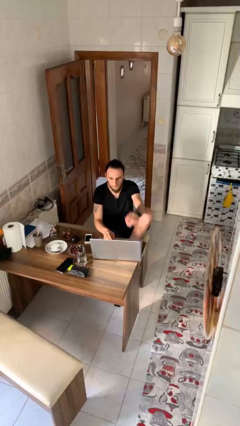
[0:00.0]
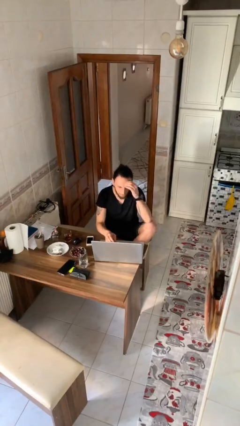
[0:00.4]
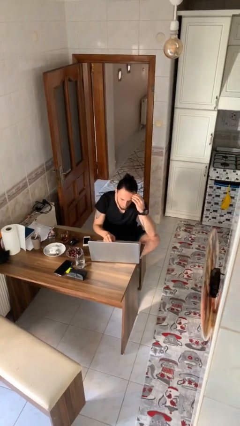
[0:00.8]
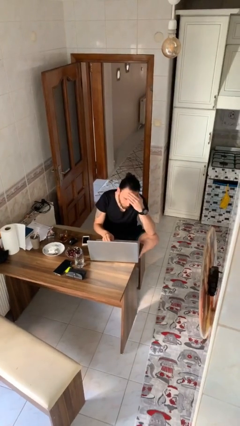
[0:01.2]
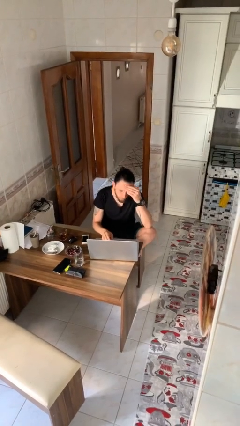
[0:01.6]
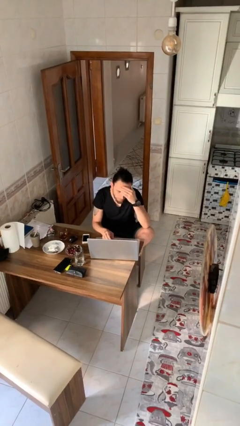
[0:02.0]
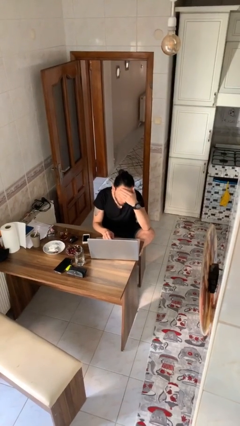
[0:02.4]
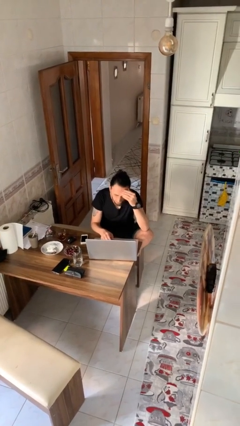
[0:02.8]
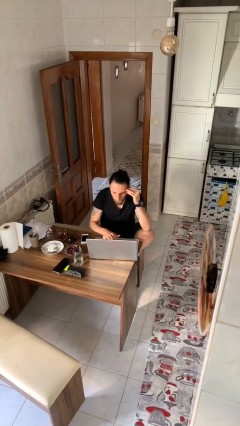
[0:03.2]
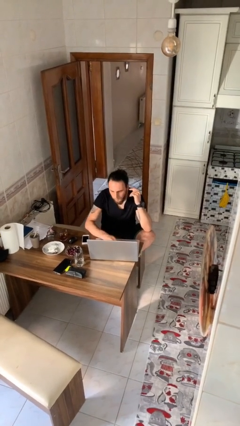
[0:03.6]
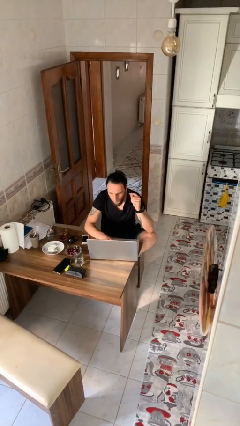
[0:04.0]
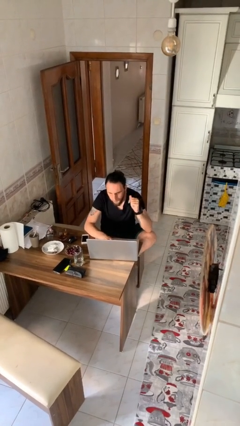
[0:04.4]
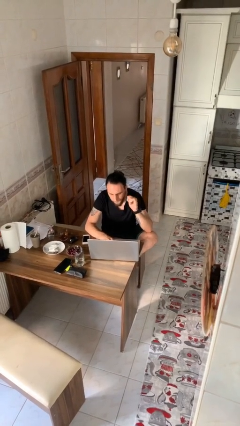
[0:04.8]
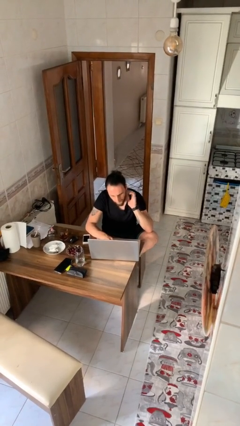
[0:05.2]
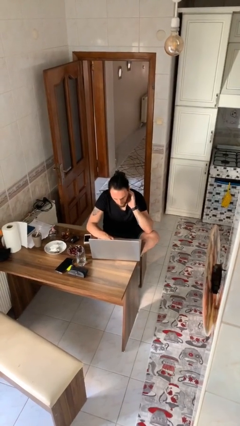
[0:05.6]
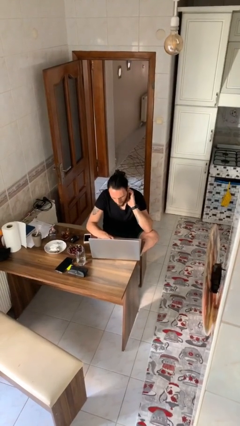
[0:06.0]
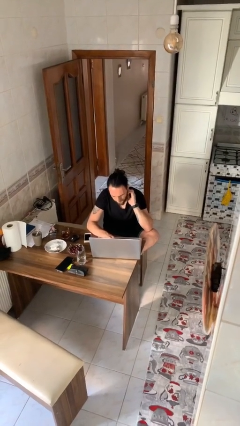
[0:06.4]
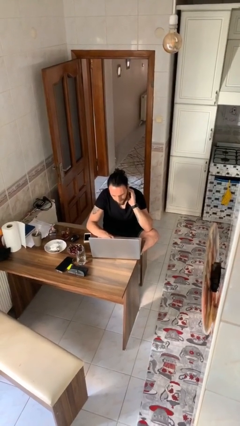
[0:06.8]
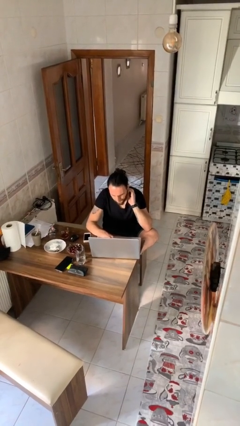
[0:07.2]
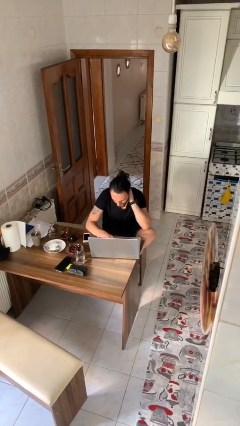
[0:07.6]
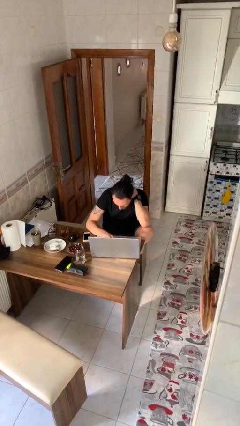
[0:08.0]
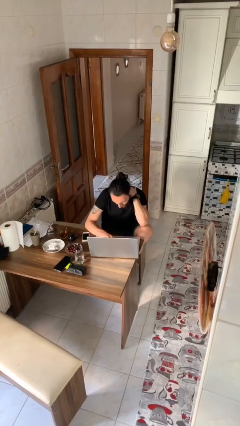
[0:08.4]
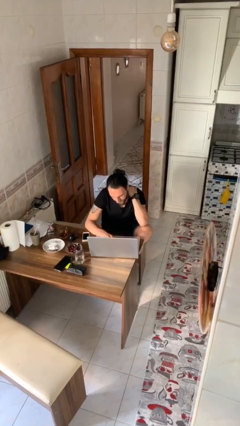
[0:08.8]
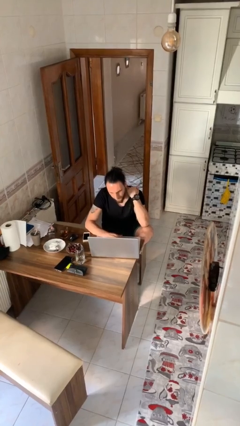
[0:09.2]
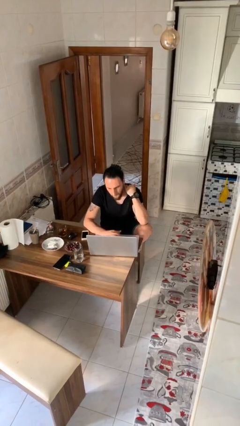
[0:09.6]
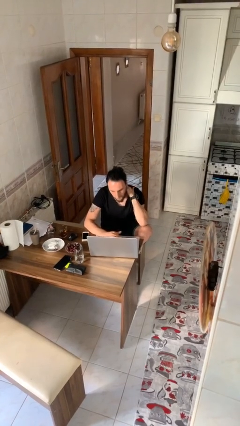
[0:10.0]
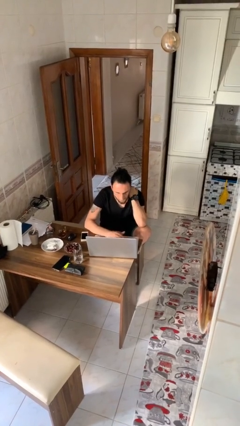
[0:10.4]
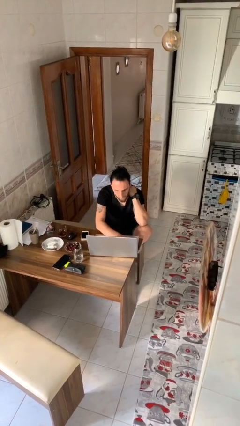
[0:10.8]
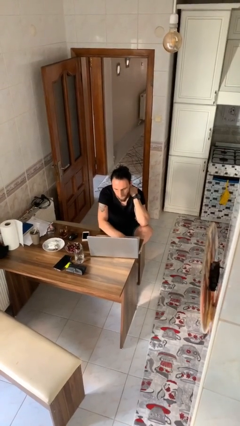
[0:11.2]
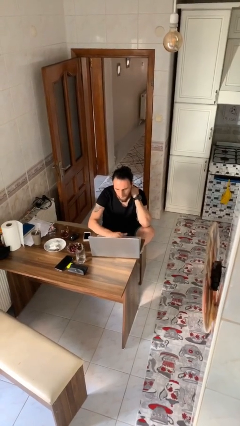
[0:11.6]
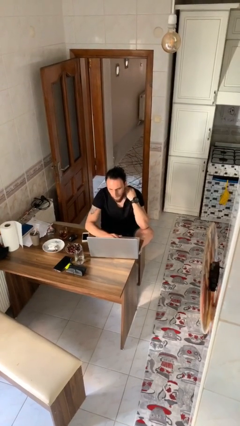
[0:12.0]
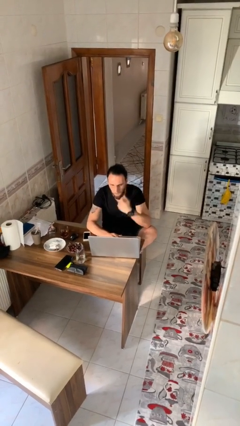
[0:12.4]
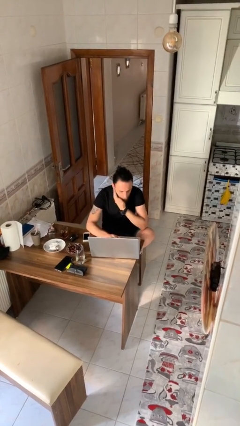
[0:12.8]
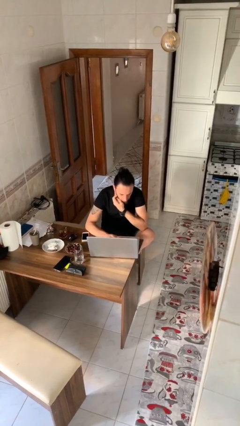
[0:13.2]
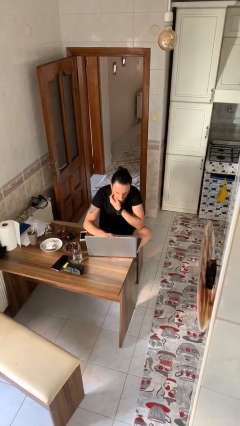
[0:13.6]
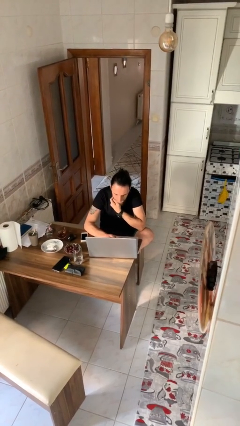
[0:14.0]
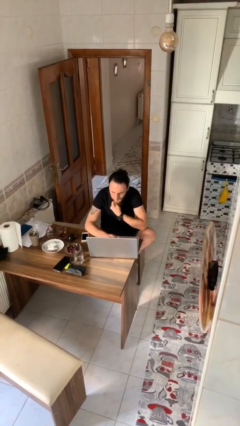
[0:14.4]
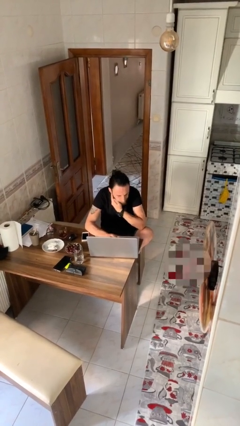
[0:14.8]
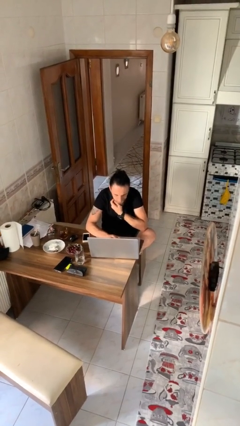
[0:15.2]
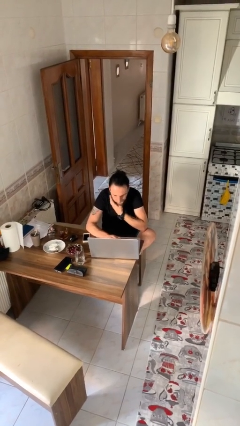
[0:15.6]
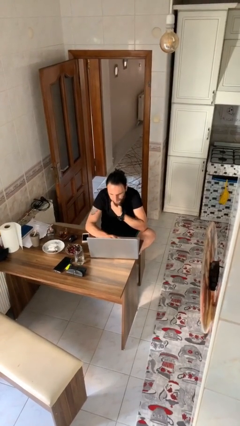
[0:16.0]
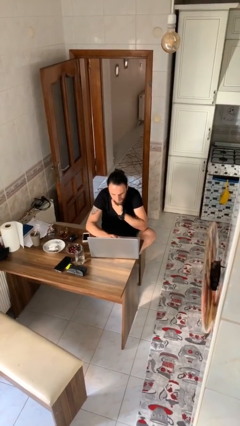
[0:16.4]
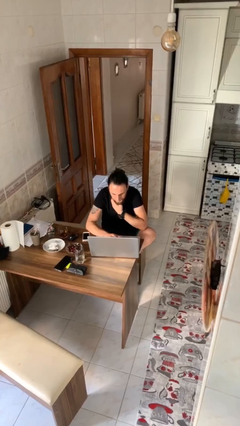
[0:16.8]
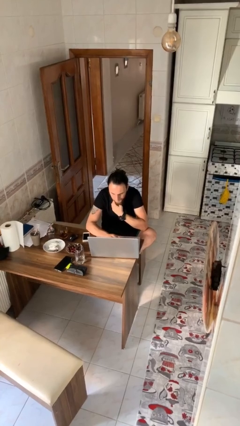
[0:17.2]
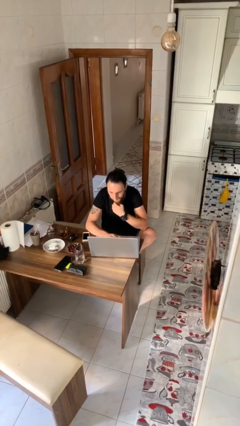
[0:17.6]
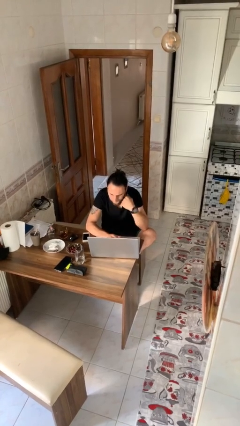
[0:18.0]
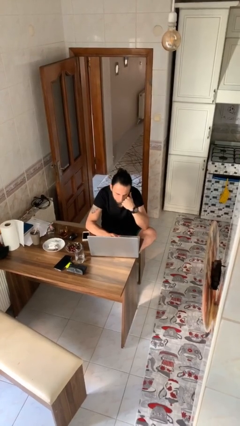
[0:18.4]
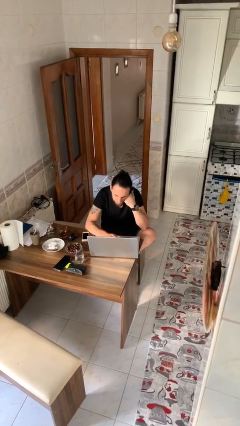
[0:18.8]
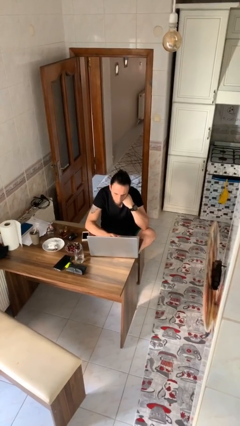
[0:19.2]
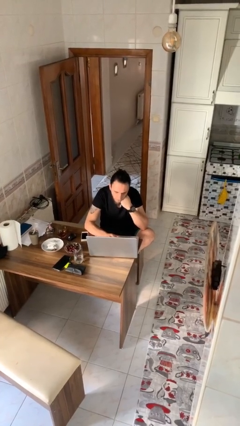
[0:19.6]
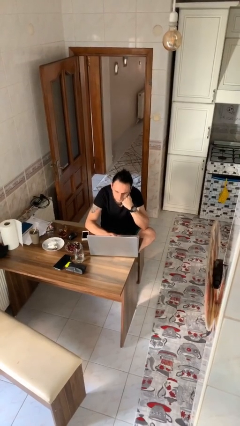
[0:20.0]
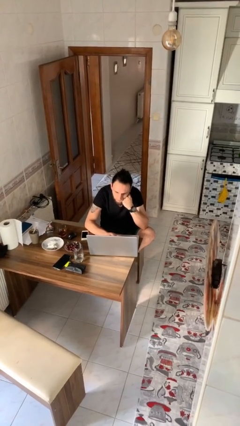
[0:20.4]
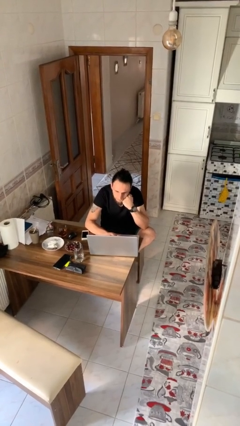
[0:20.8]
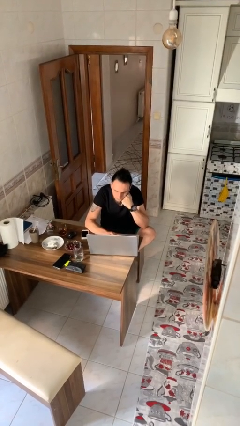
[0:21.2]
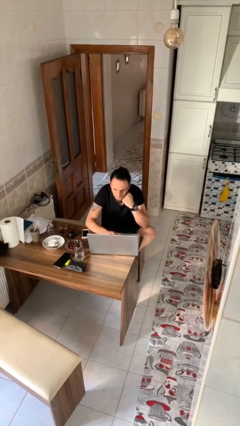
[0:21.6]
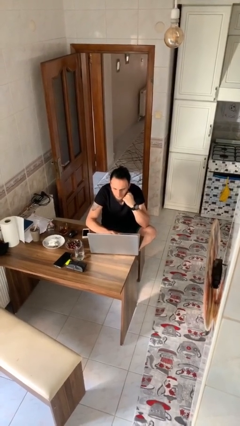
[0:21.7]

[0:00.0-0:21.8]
person interacts with laptop

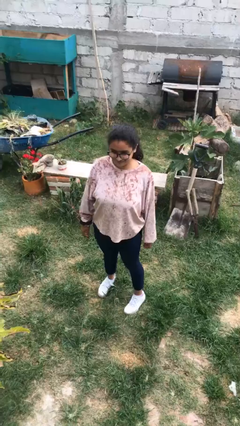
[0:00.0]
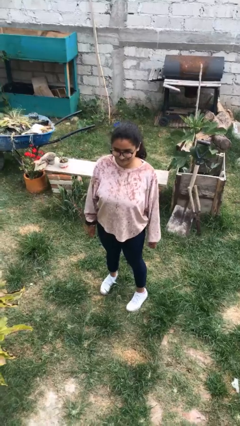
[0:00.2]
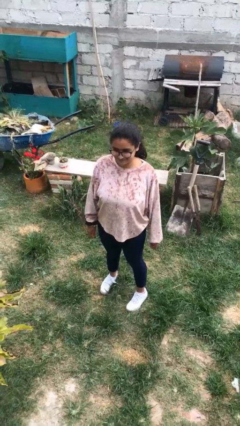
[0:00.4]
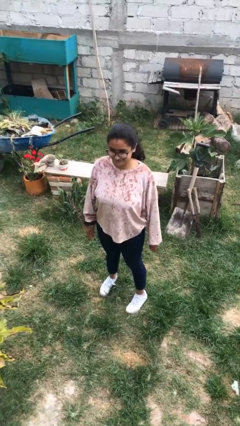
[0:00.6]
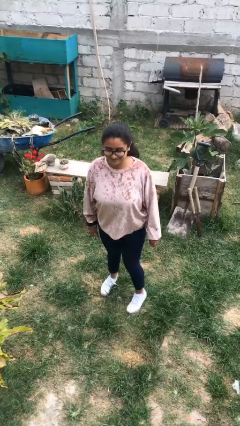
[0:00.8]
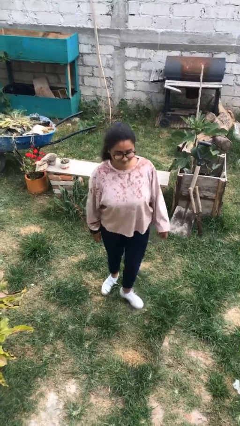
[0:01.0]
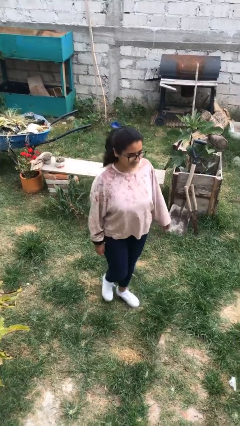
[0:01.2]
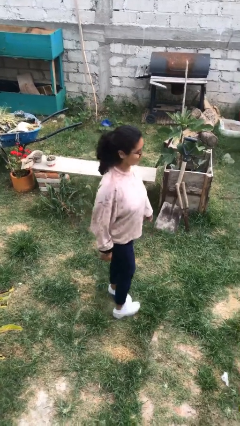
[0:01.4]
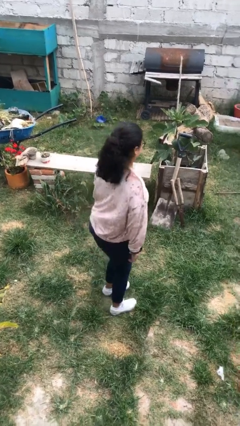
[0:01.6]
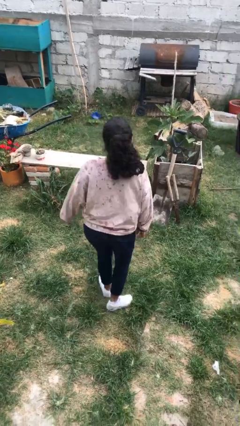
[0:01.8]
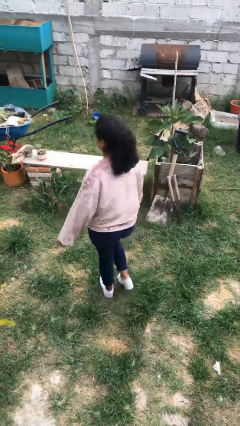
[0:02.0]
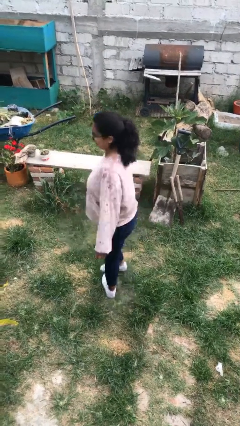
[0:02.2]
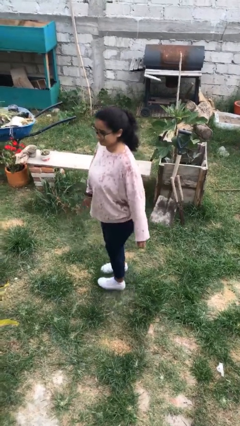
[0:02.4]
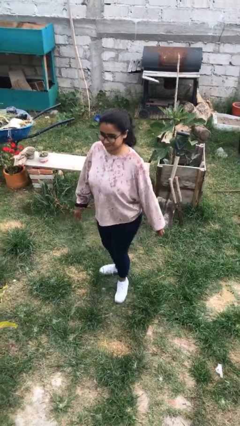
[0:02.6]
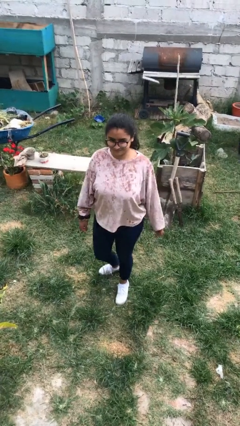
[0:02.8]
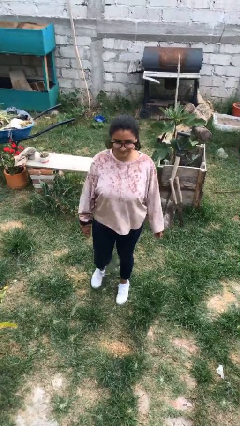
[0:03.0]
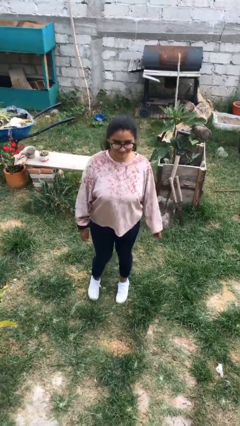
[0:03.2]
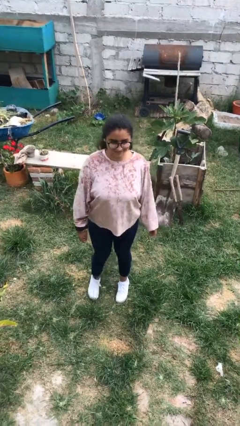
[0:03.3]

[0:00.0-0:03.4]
person twirls

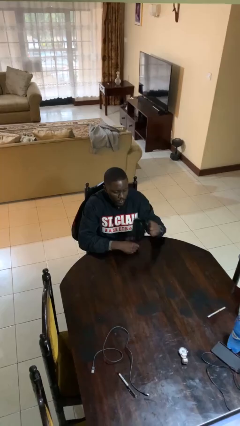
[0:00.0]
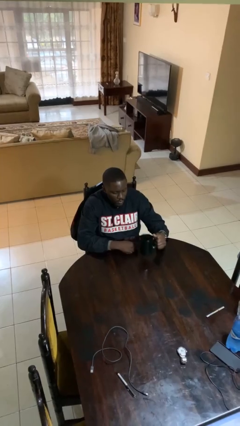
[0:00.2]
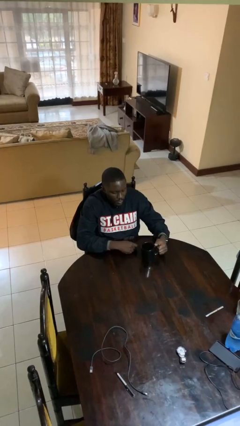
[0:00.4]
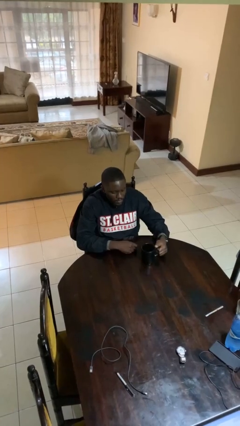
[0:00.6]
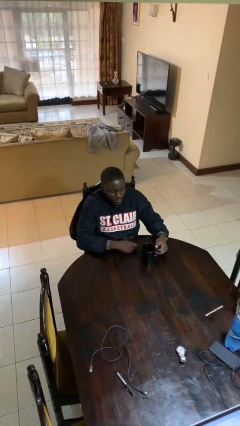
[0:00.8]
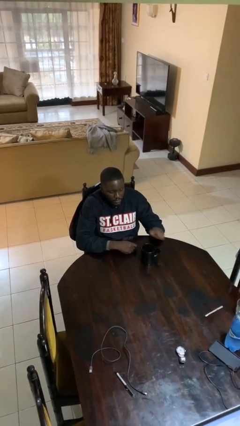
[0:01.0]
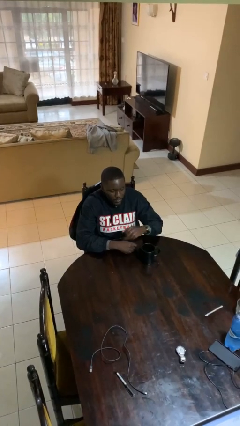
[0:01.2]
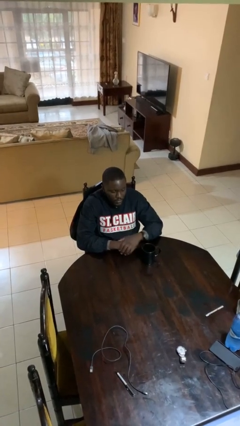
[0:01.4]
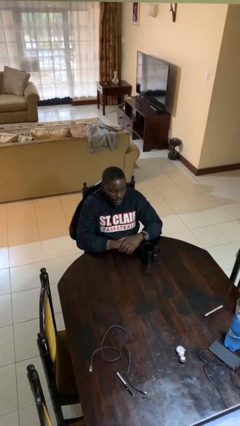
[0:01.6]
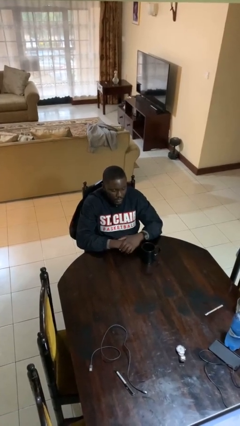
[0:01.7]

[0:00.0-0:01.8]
person puts down object on table

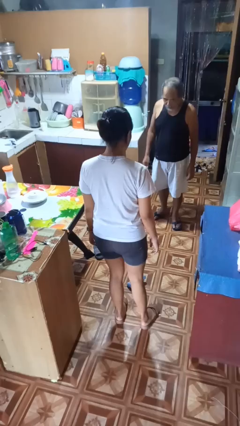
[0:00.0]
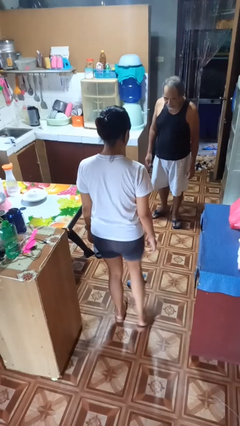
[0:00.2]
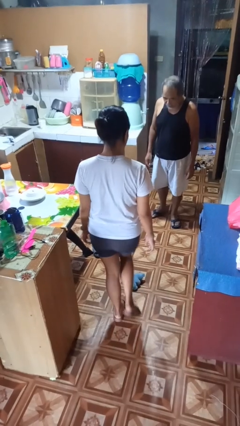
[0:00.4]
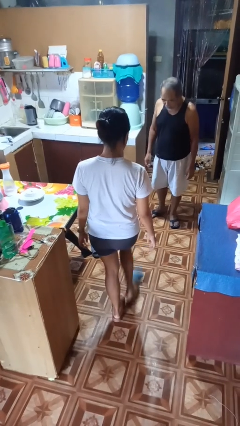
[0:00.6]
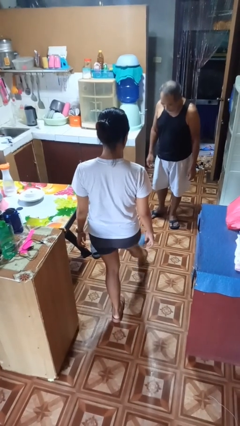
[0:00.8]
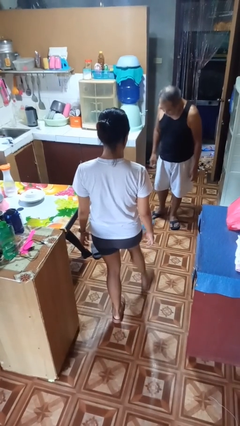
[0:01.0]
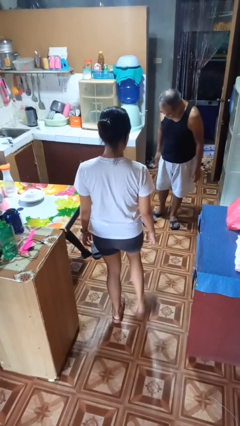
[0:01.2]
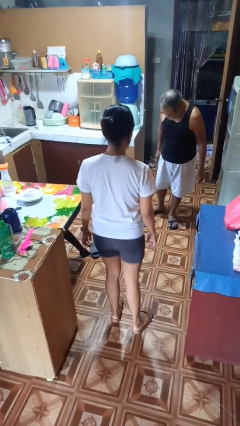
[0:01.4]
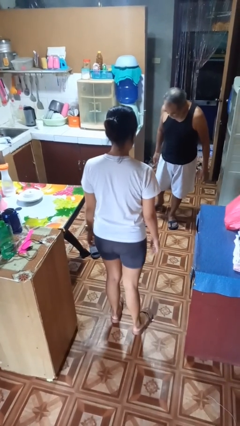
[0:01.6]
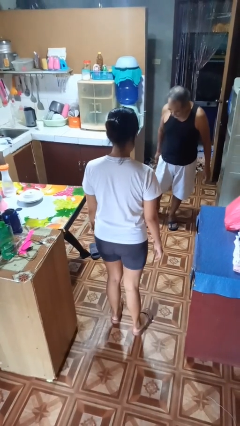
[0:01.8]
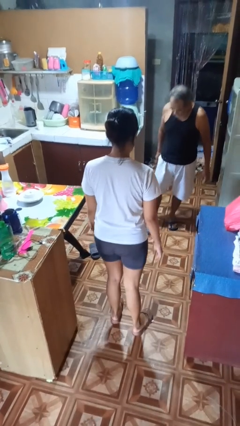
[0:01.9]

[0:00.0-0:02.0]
person kicks object to person
